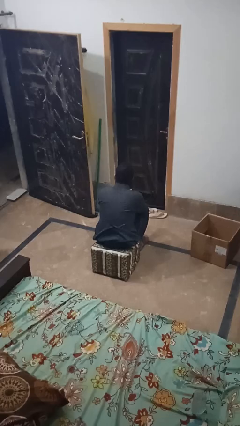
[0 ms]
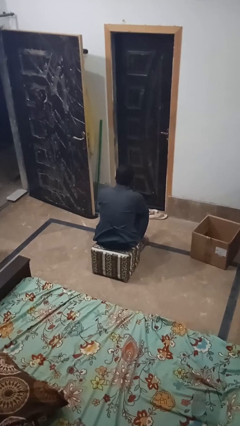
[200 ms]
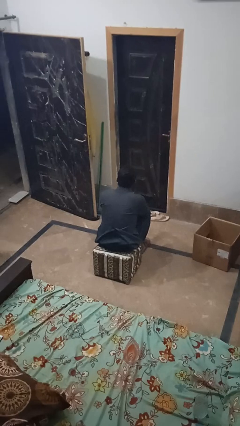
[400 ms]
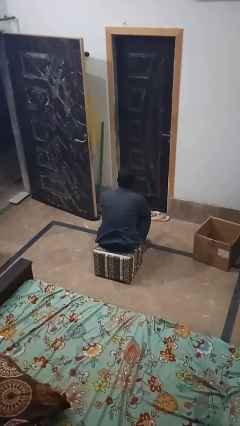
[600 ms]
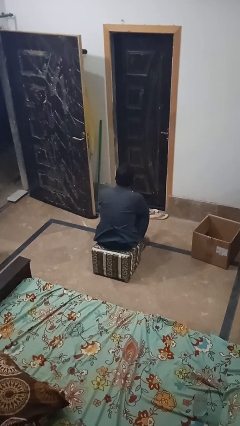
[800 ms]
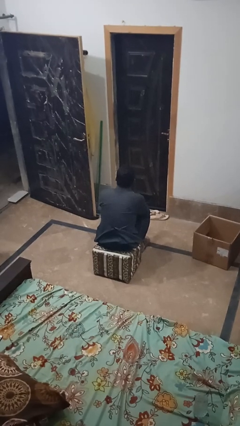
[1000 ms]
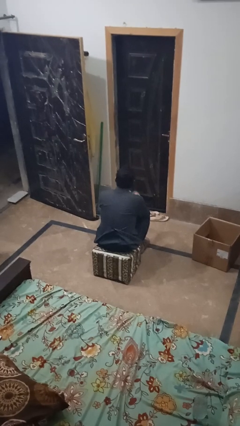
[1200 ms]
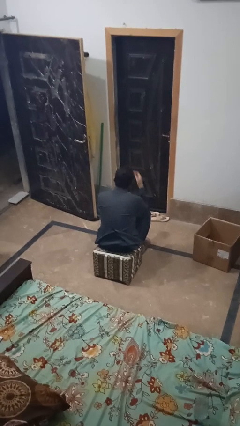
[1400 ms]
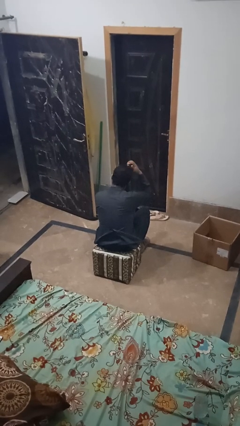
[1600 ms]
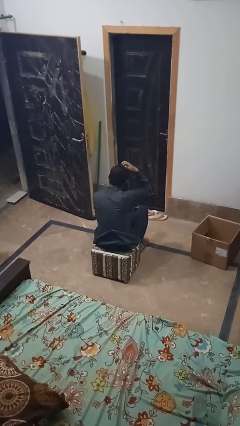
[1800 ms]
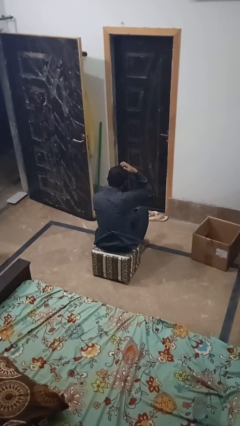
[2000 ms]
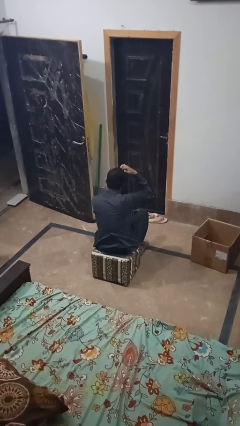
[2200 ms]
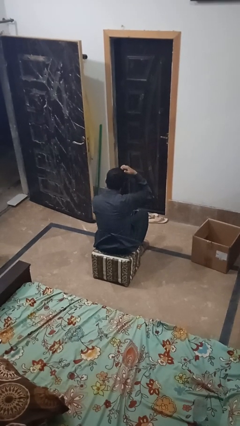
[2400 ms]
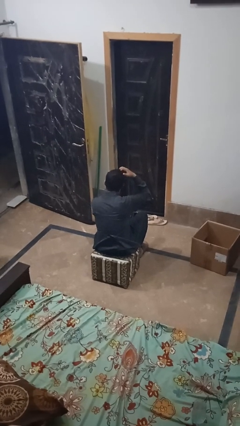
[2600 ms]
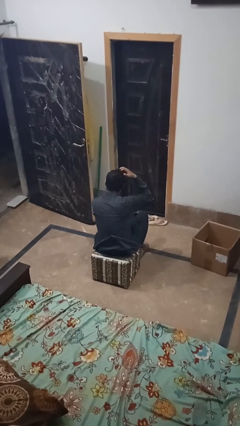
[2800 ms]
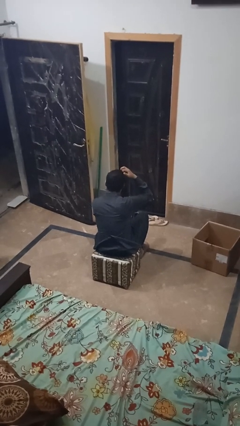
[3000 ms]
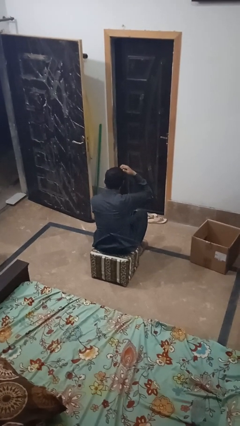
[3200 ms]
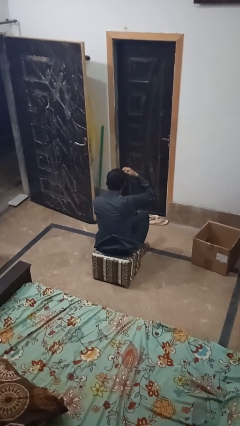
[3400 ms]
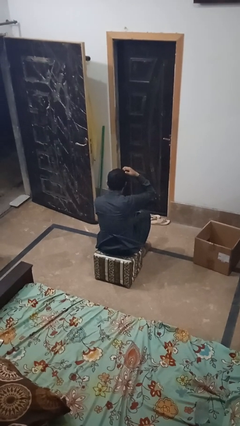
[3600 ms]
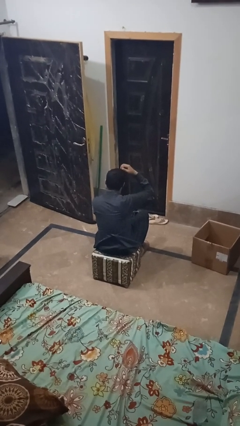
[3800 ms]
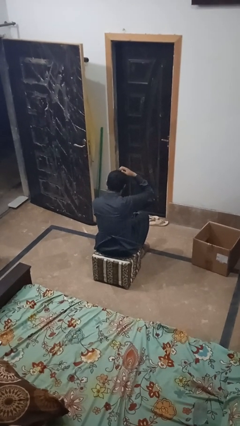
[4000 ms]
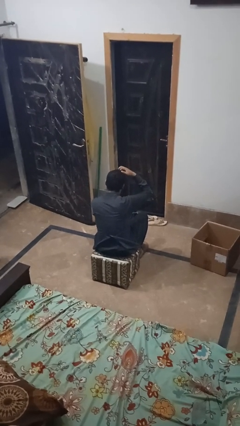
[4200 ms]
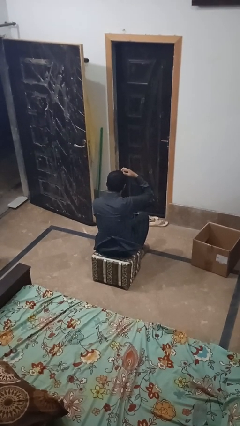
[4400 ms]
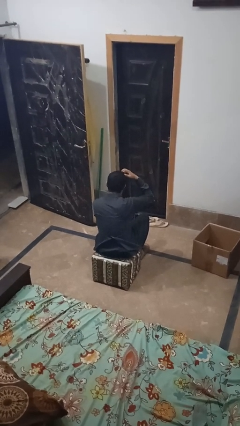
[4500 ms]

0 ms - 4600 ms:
person strokes hair

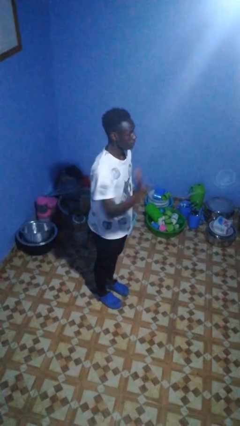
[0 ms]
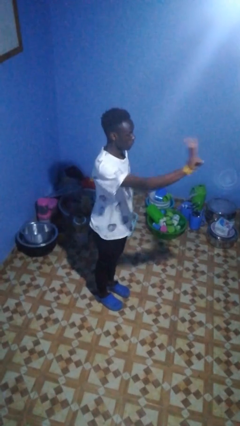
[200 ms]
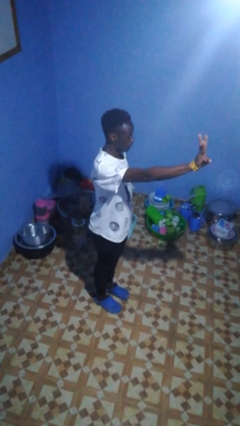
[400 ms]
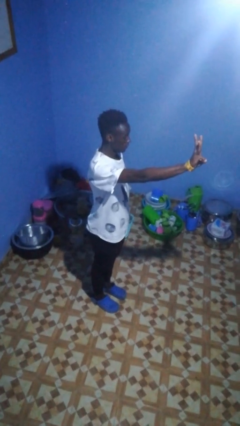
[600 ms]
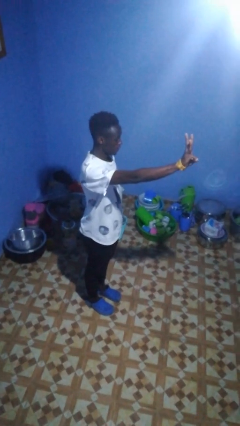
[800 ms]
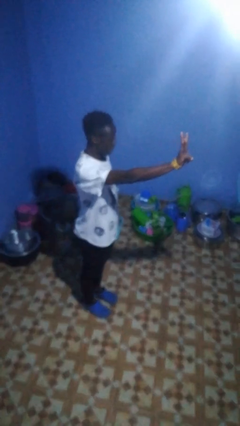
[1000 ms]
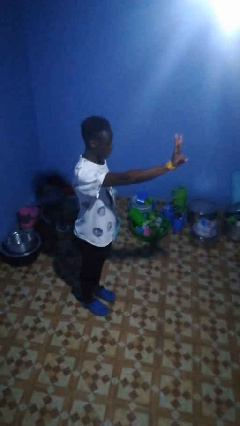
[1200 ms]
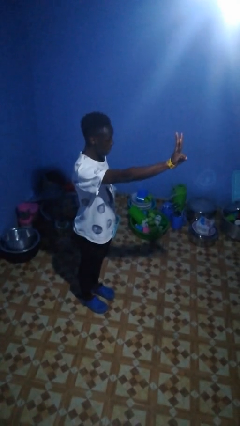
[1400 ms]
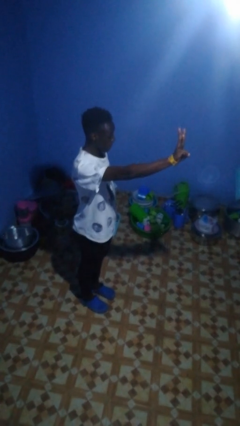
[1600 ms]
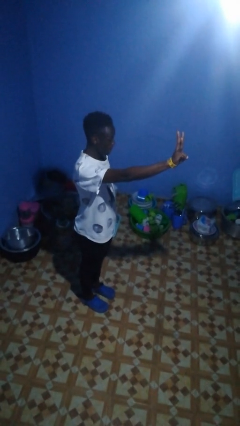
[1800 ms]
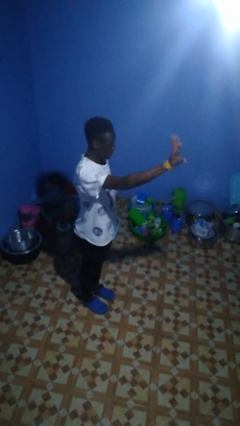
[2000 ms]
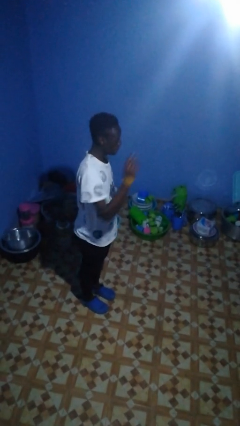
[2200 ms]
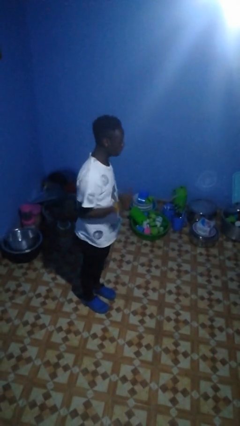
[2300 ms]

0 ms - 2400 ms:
person gestures number three

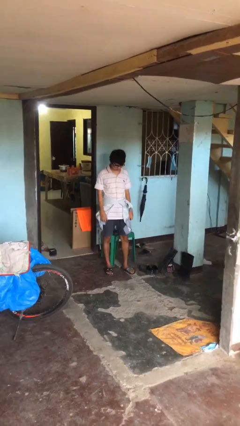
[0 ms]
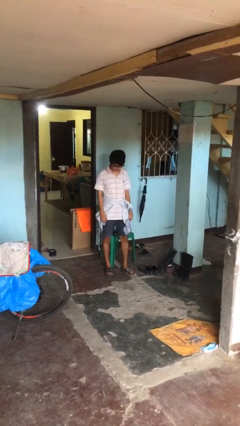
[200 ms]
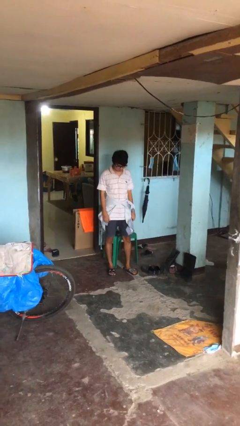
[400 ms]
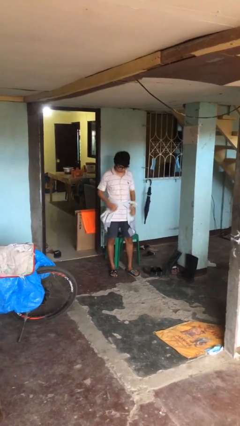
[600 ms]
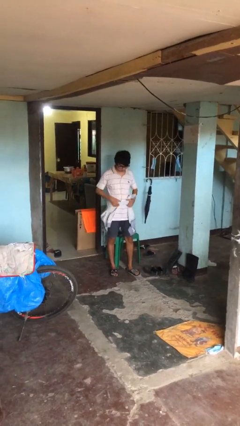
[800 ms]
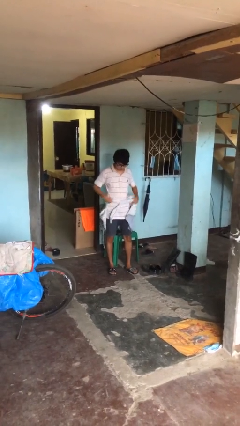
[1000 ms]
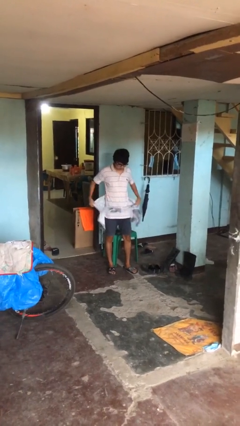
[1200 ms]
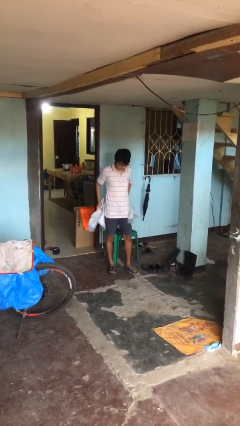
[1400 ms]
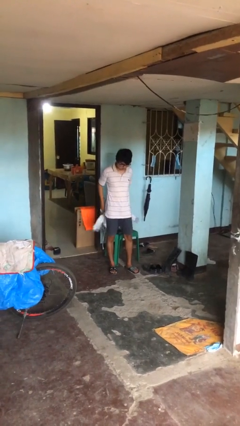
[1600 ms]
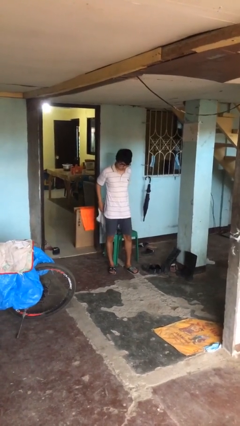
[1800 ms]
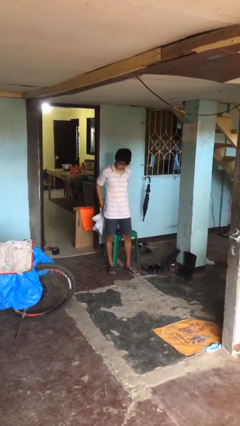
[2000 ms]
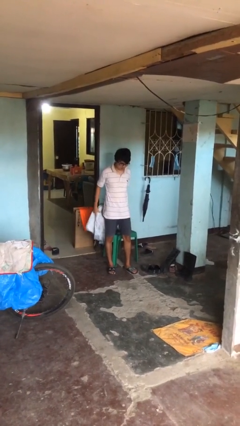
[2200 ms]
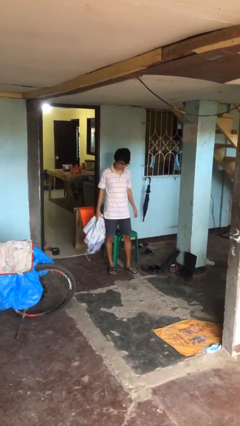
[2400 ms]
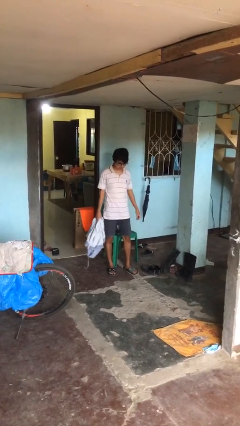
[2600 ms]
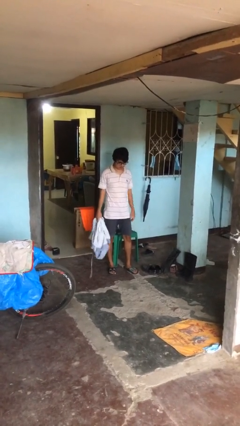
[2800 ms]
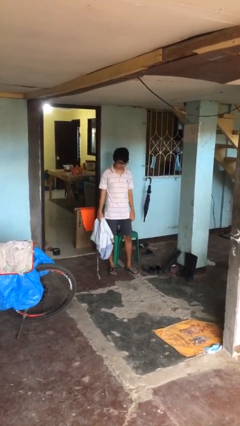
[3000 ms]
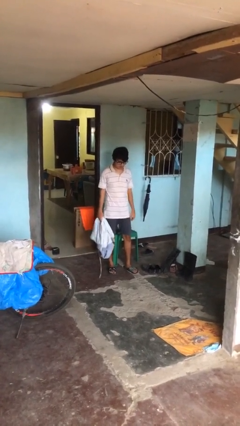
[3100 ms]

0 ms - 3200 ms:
person unties jacket around waist

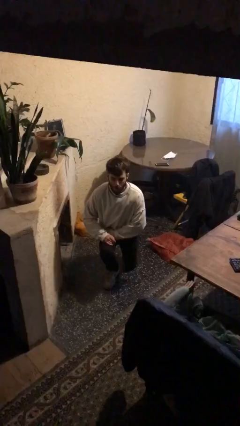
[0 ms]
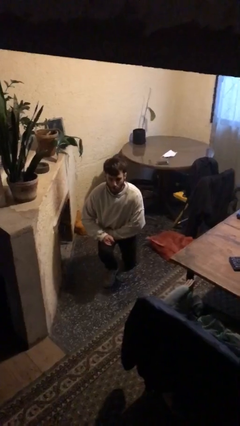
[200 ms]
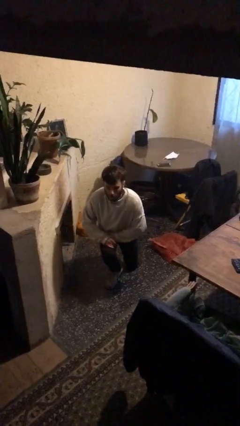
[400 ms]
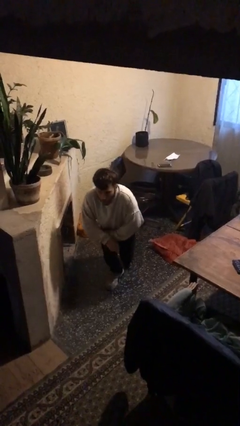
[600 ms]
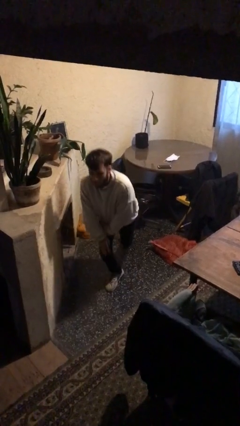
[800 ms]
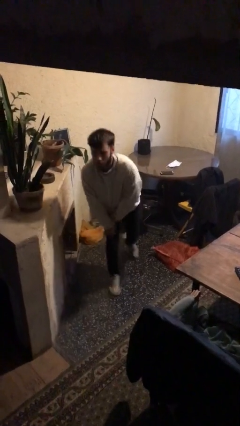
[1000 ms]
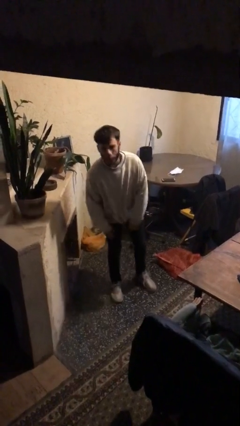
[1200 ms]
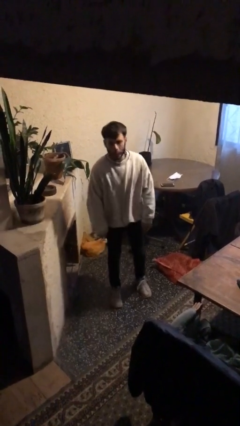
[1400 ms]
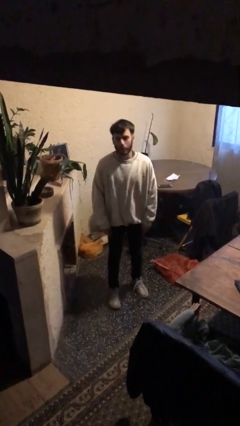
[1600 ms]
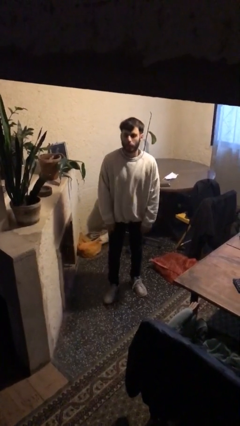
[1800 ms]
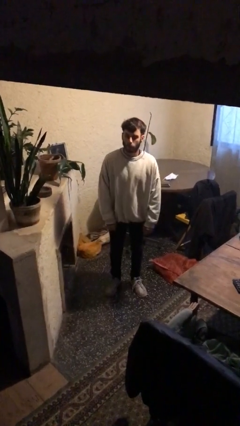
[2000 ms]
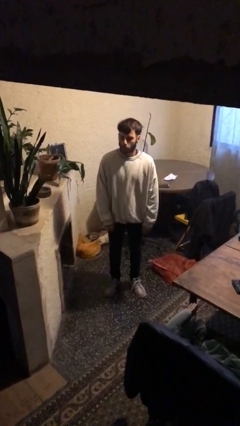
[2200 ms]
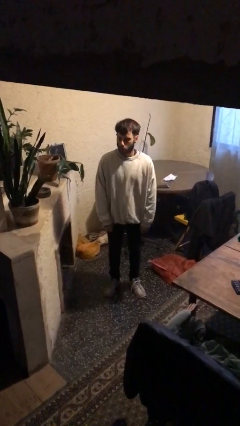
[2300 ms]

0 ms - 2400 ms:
person stands up from floor

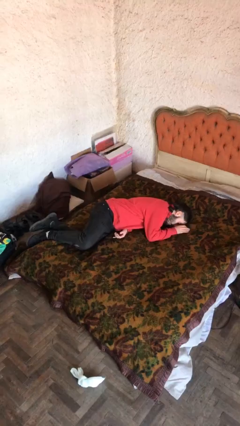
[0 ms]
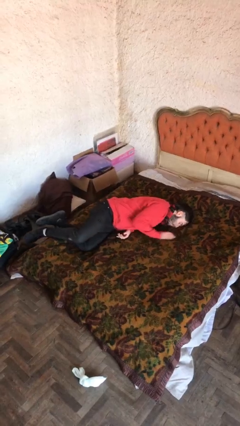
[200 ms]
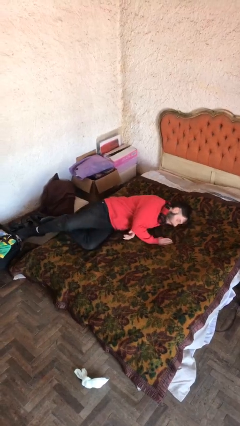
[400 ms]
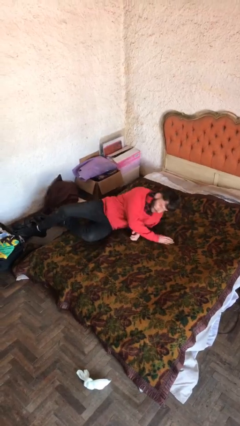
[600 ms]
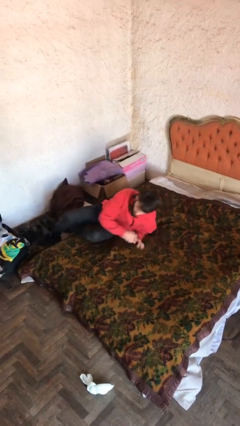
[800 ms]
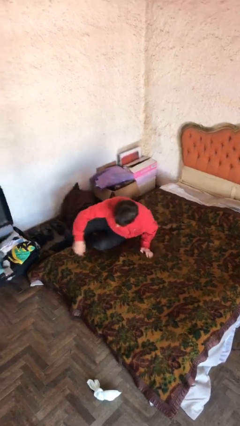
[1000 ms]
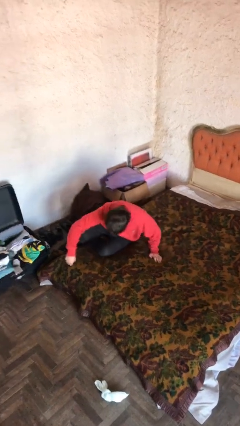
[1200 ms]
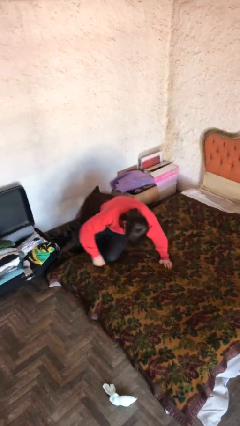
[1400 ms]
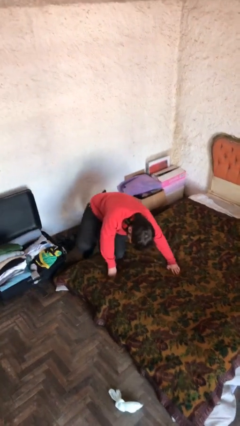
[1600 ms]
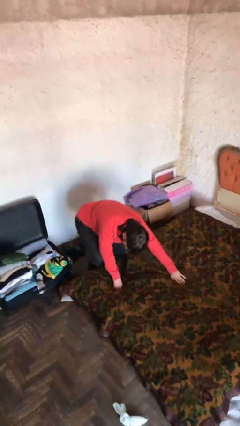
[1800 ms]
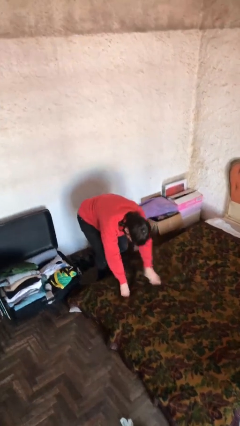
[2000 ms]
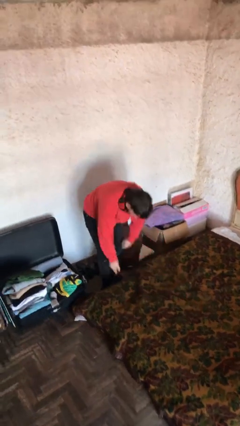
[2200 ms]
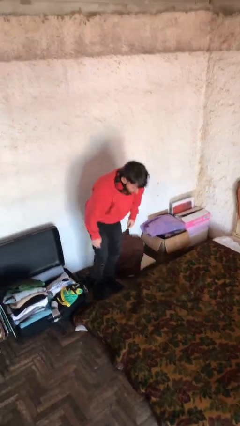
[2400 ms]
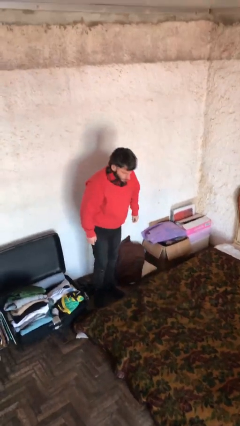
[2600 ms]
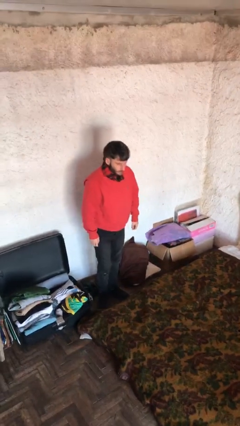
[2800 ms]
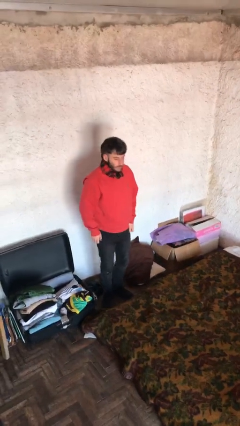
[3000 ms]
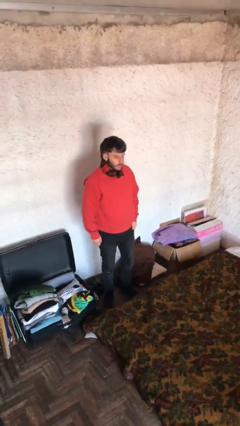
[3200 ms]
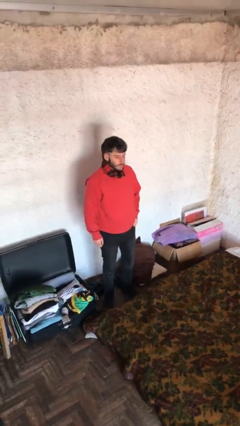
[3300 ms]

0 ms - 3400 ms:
person stands up

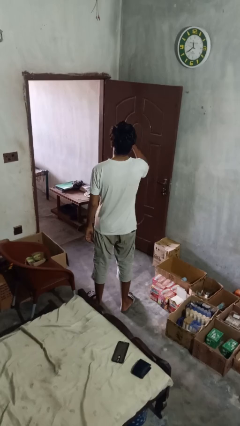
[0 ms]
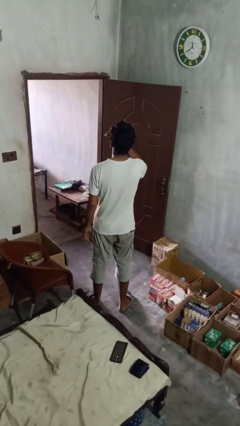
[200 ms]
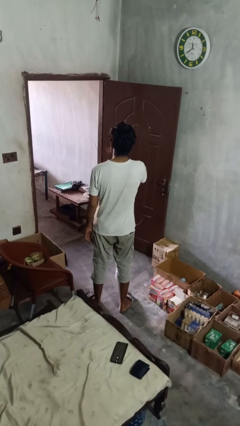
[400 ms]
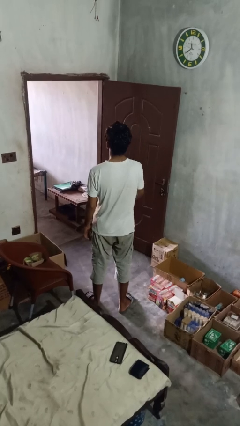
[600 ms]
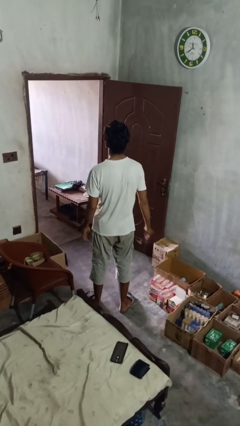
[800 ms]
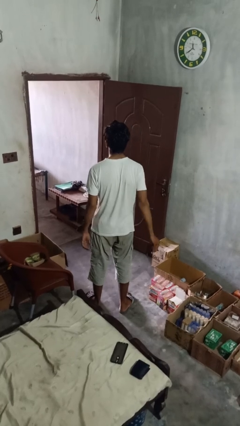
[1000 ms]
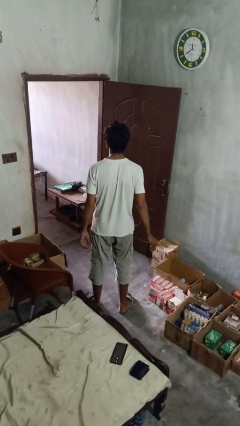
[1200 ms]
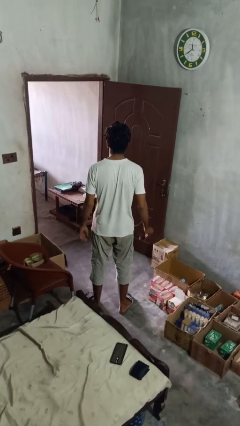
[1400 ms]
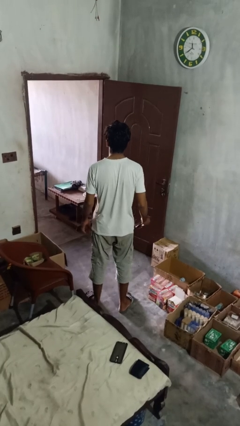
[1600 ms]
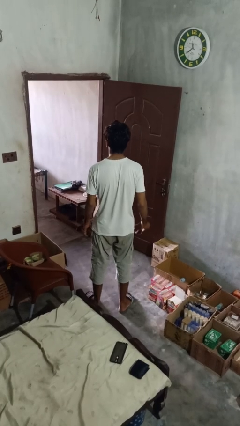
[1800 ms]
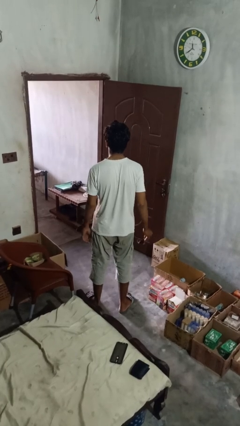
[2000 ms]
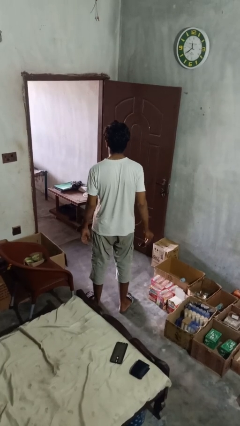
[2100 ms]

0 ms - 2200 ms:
person takes off glasses
